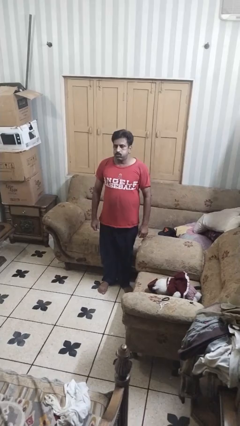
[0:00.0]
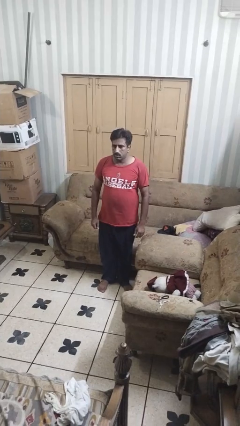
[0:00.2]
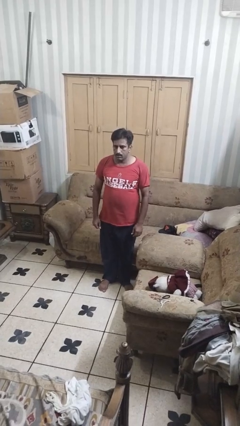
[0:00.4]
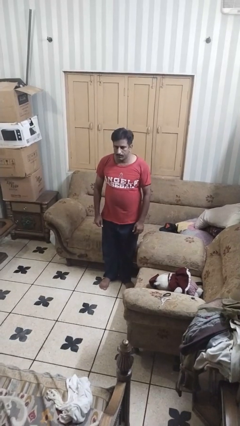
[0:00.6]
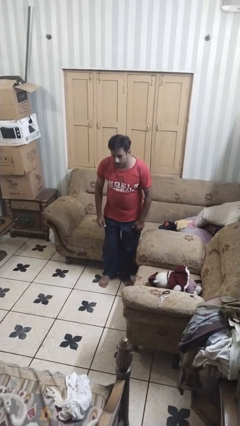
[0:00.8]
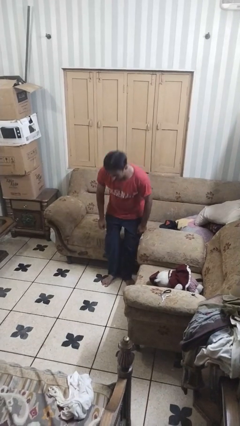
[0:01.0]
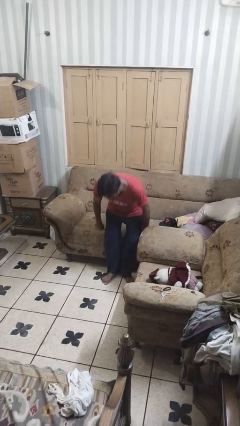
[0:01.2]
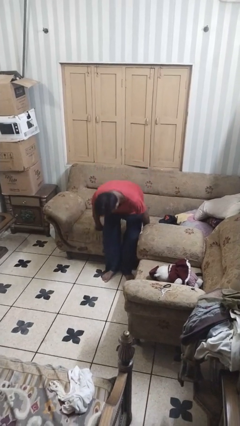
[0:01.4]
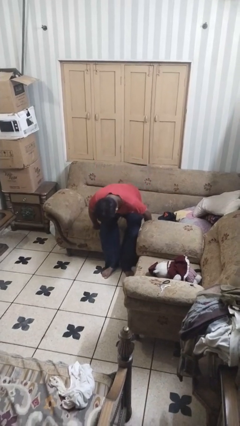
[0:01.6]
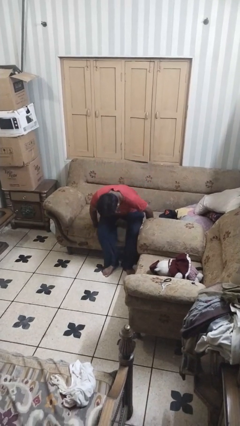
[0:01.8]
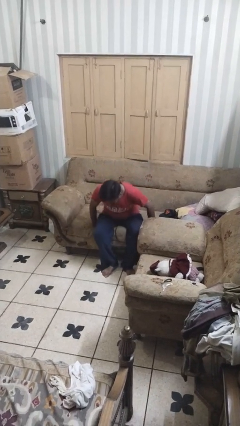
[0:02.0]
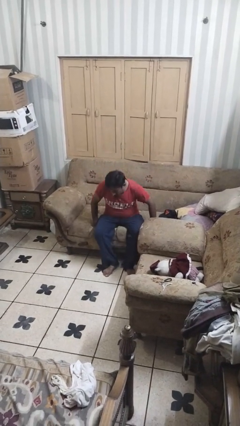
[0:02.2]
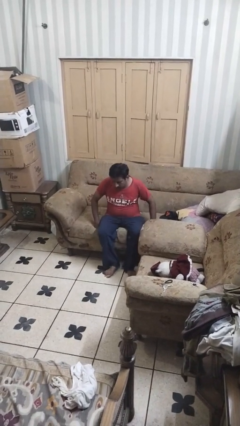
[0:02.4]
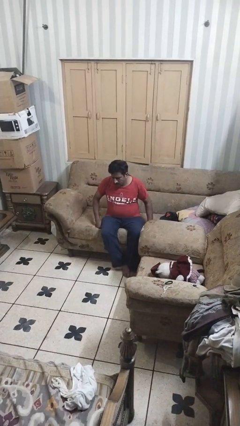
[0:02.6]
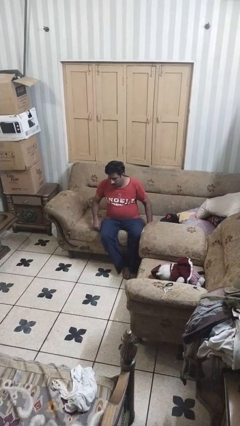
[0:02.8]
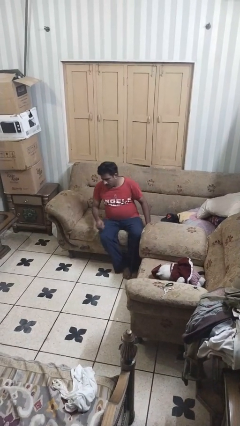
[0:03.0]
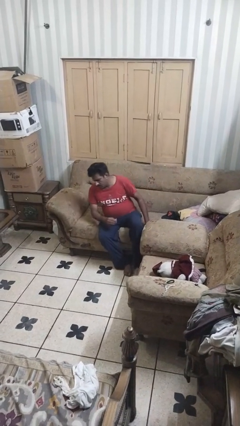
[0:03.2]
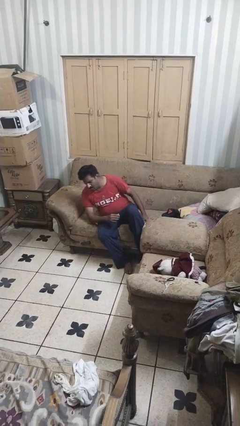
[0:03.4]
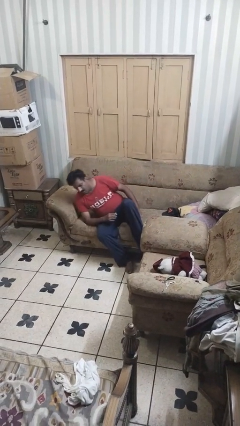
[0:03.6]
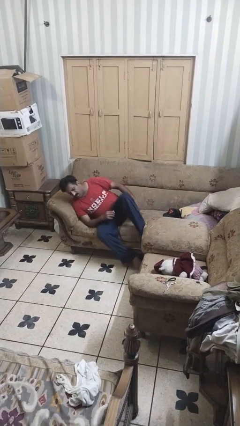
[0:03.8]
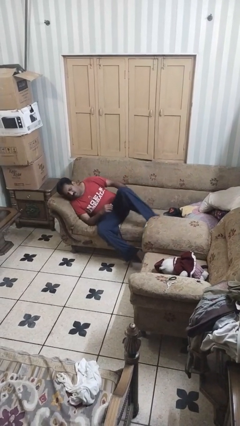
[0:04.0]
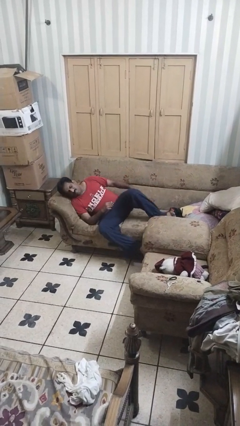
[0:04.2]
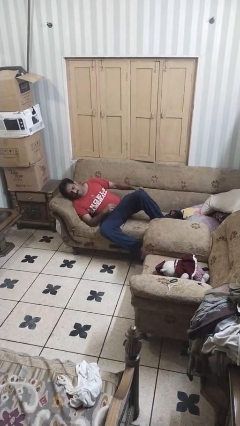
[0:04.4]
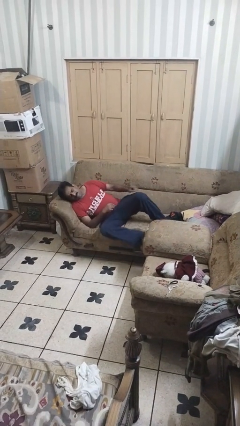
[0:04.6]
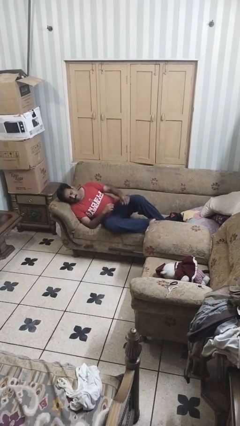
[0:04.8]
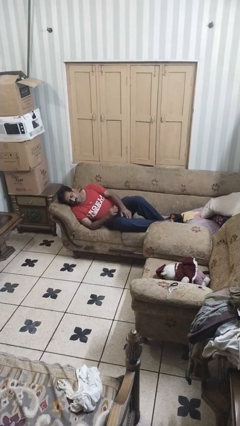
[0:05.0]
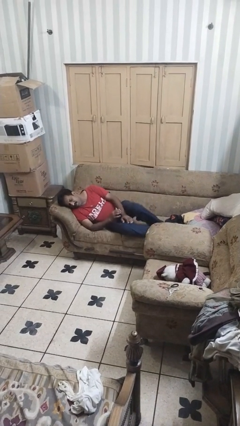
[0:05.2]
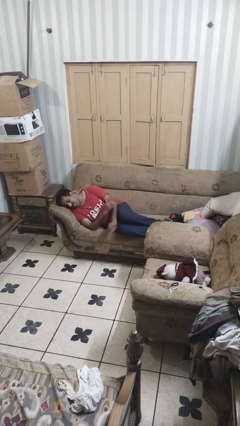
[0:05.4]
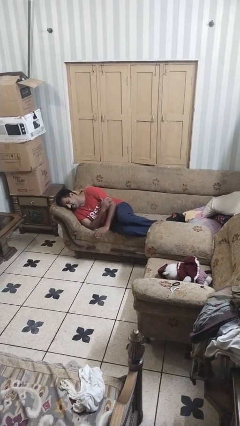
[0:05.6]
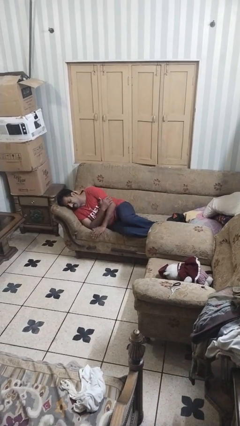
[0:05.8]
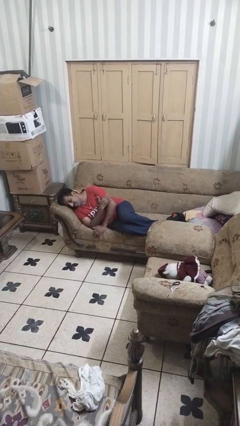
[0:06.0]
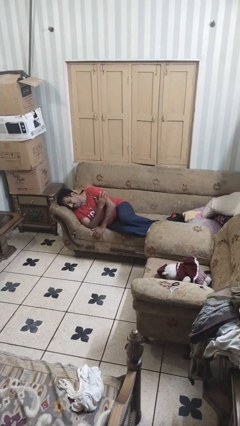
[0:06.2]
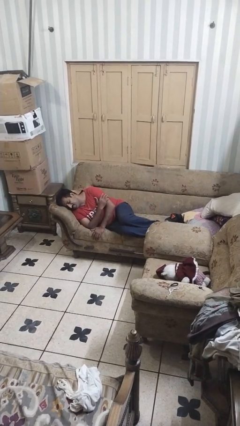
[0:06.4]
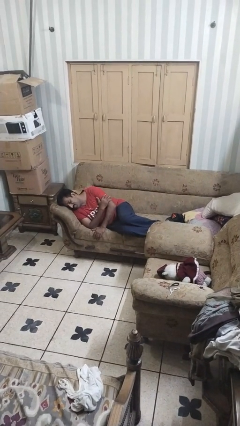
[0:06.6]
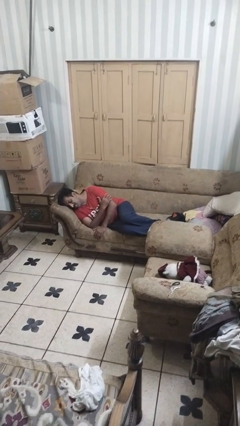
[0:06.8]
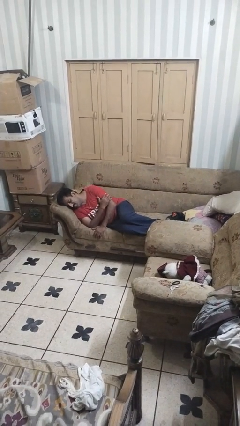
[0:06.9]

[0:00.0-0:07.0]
person lies down on couch

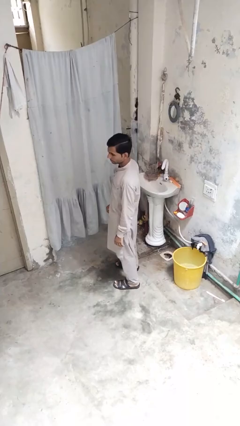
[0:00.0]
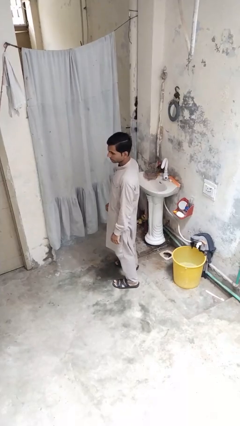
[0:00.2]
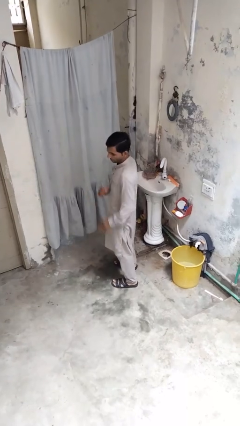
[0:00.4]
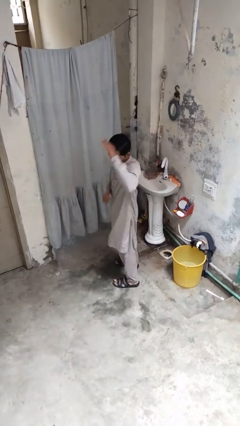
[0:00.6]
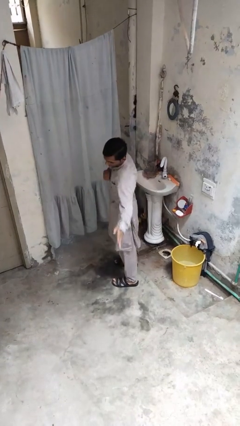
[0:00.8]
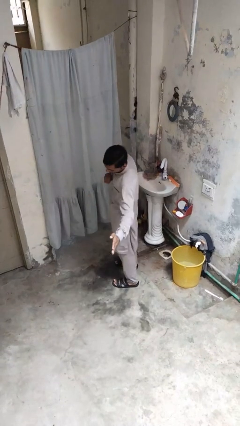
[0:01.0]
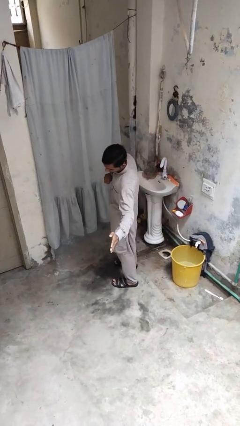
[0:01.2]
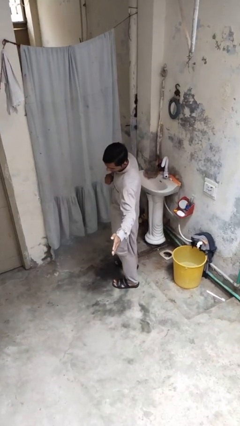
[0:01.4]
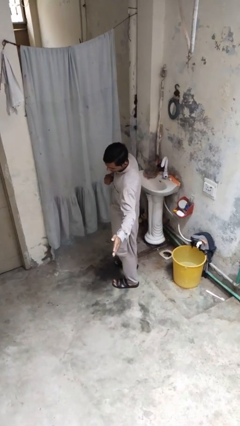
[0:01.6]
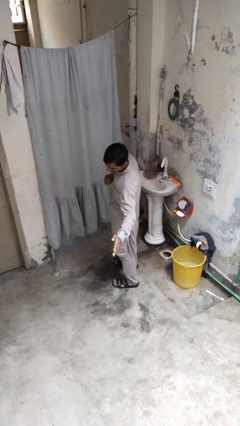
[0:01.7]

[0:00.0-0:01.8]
person karate chop

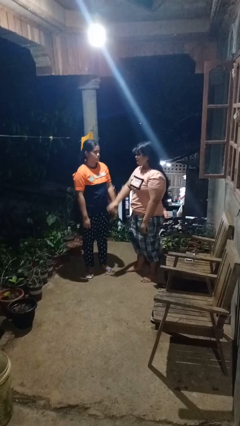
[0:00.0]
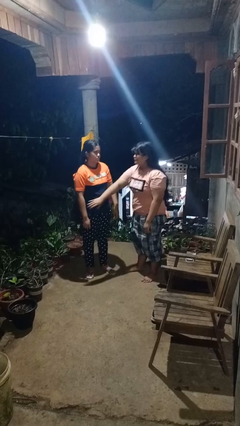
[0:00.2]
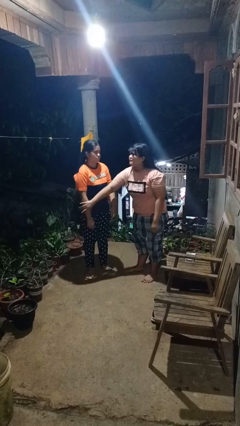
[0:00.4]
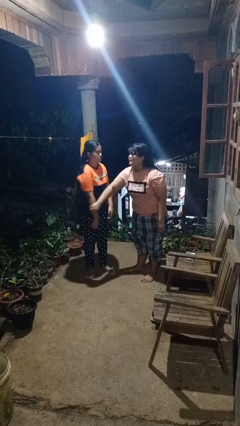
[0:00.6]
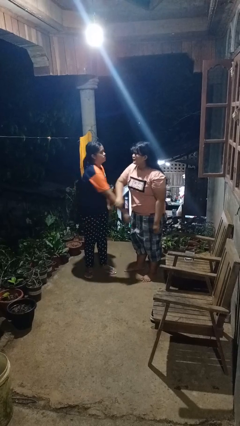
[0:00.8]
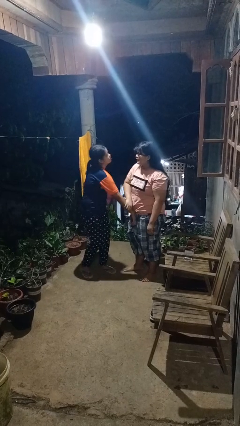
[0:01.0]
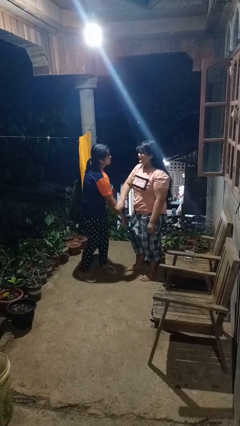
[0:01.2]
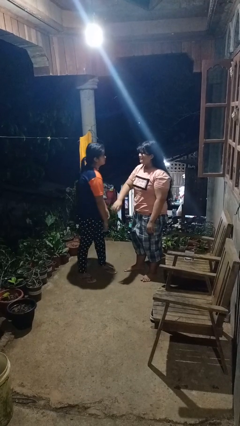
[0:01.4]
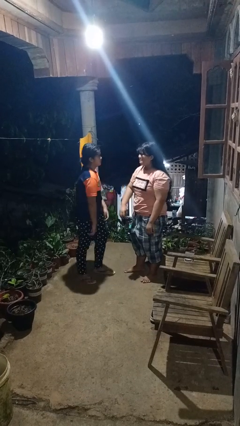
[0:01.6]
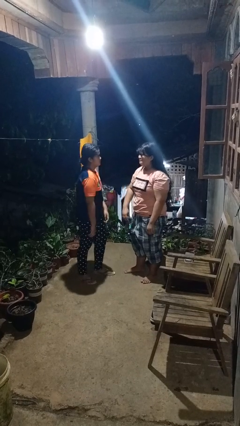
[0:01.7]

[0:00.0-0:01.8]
person grabs person by forearm

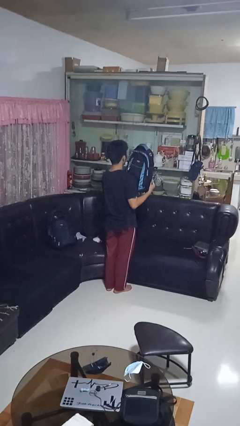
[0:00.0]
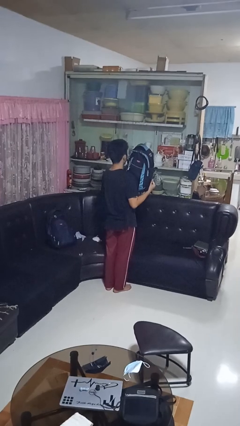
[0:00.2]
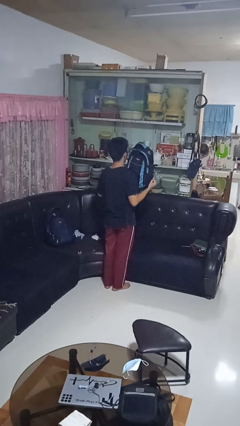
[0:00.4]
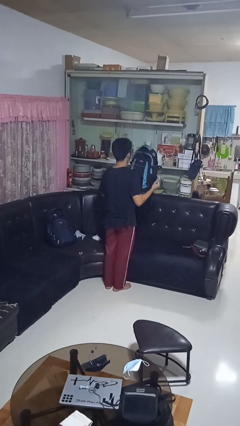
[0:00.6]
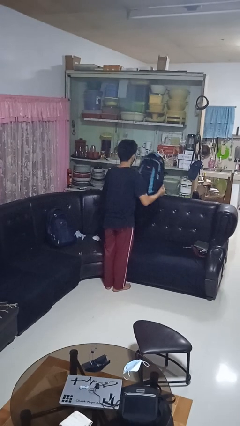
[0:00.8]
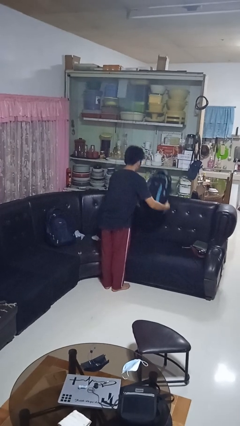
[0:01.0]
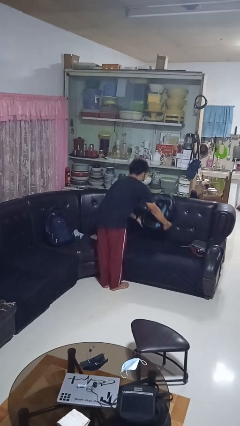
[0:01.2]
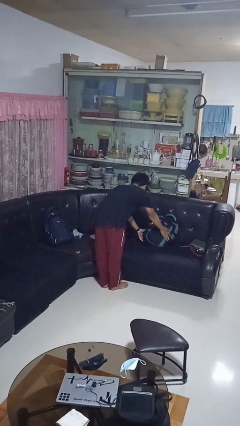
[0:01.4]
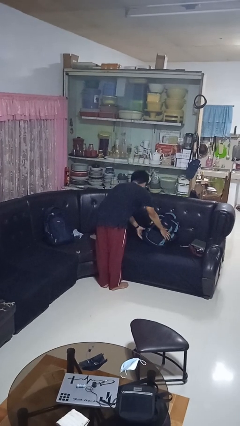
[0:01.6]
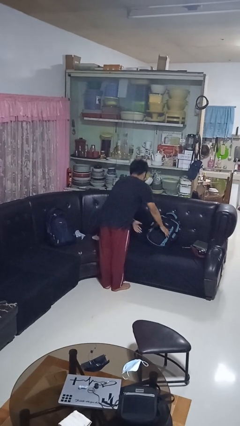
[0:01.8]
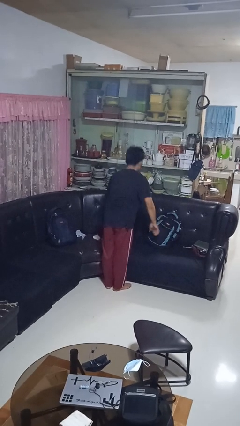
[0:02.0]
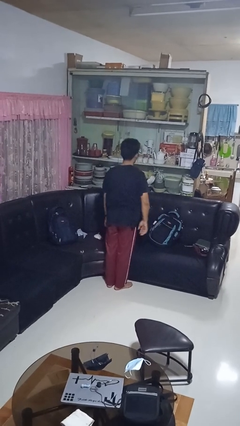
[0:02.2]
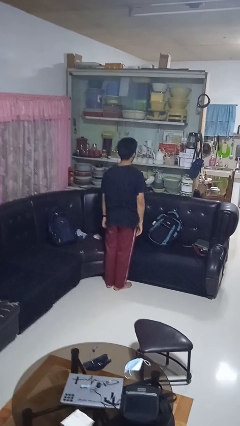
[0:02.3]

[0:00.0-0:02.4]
person puts down object on couch

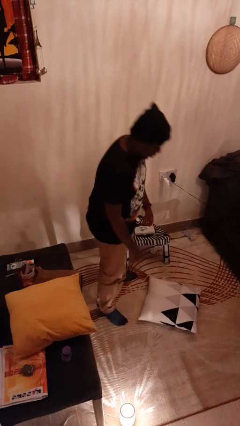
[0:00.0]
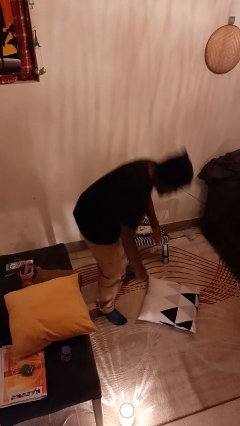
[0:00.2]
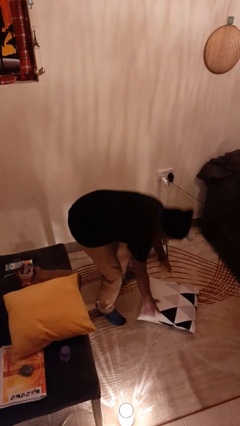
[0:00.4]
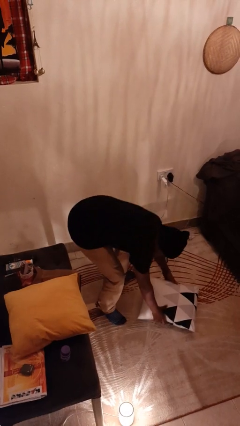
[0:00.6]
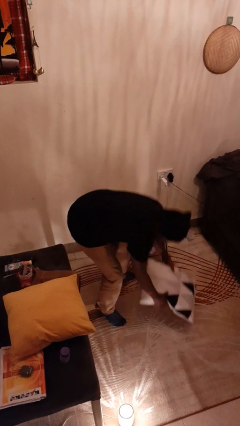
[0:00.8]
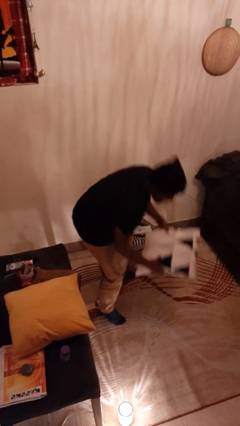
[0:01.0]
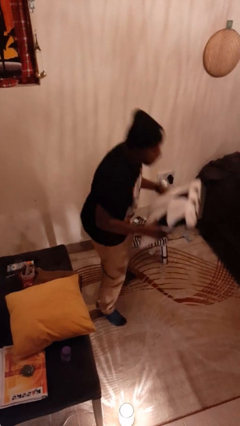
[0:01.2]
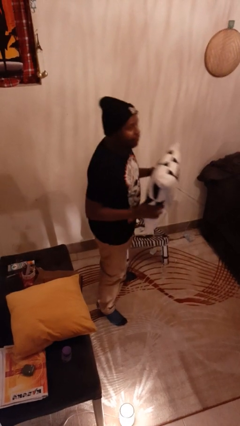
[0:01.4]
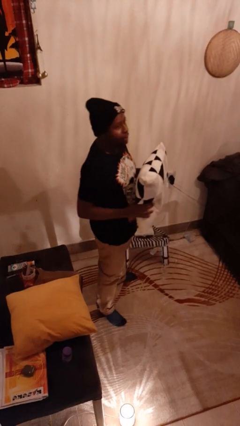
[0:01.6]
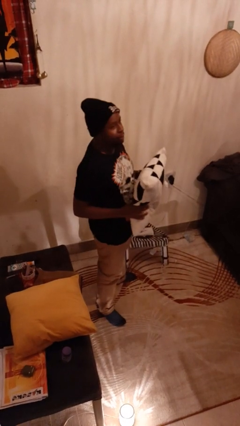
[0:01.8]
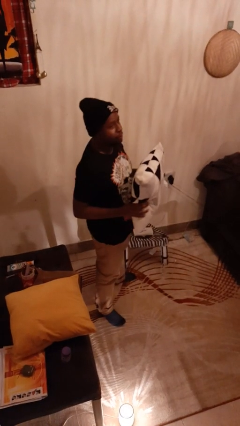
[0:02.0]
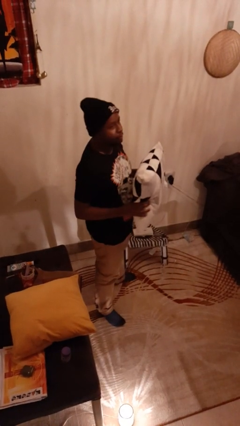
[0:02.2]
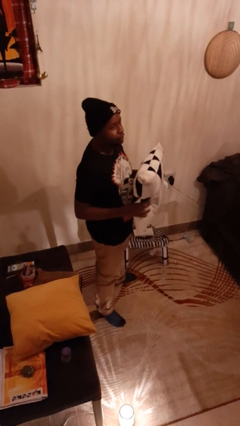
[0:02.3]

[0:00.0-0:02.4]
person picks up object from floor

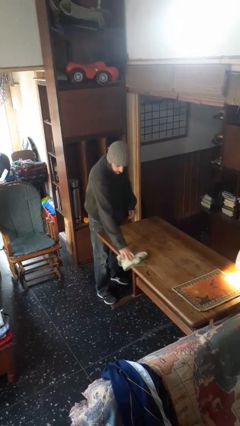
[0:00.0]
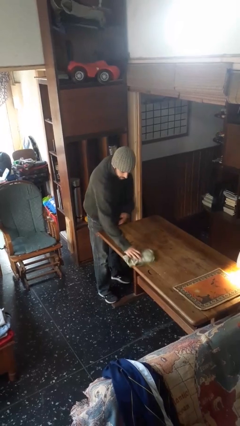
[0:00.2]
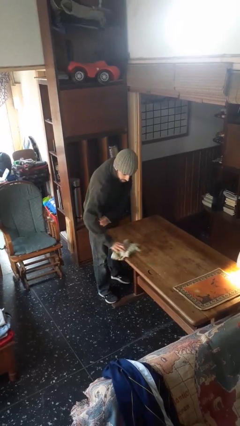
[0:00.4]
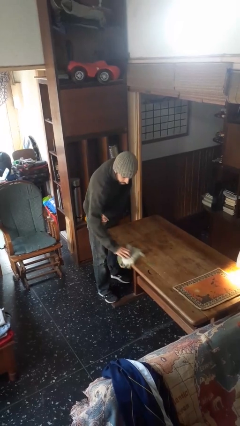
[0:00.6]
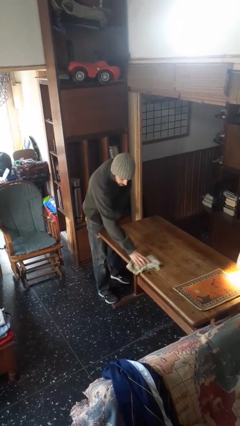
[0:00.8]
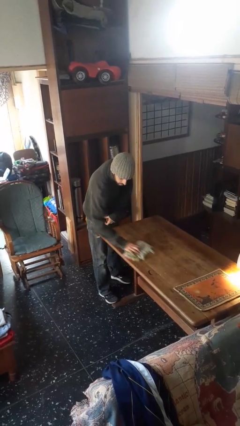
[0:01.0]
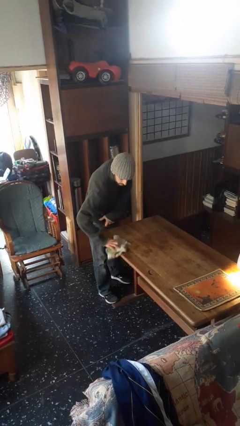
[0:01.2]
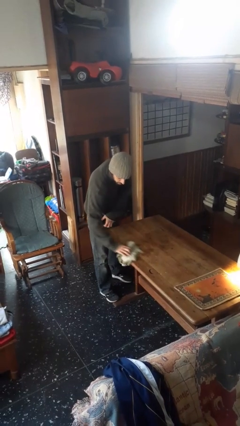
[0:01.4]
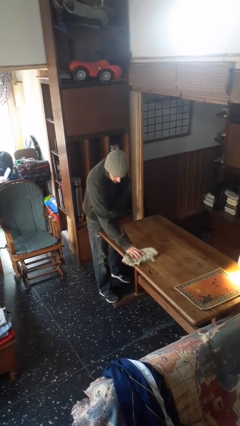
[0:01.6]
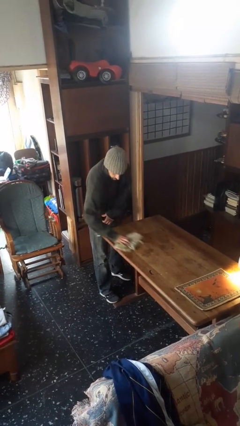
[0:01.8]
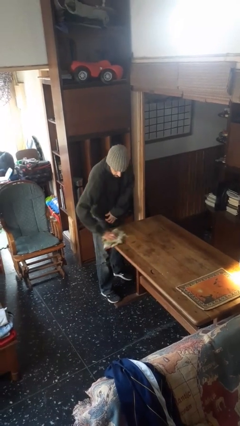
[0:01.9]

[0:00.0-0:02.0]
person cleans table with rag
